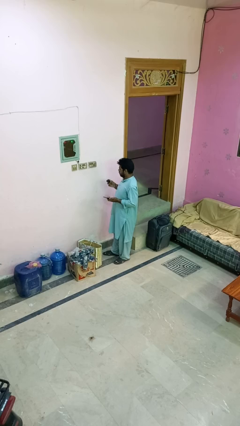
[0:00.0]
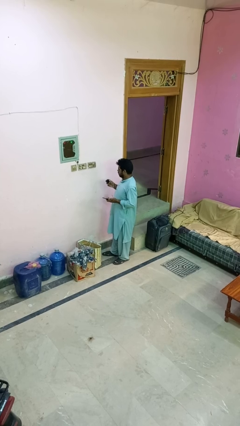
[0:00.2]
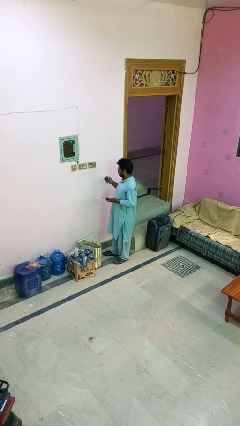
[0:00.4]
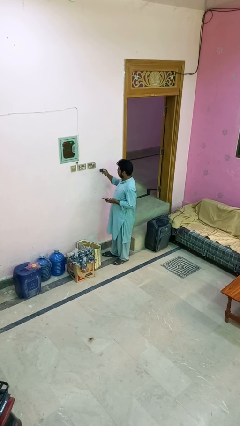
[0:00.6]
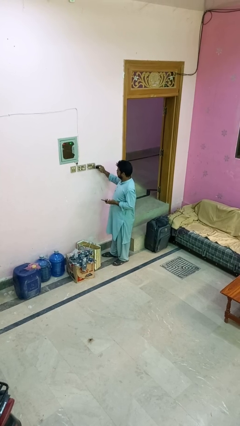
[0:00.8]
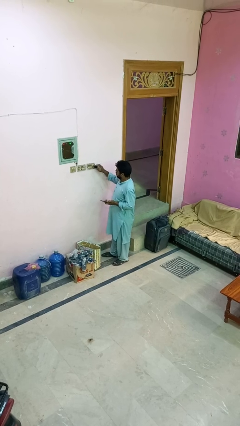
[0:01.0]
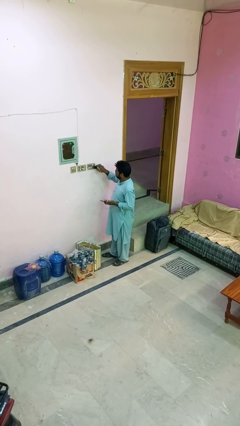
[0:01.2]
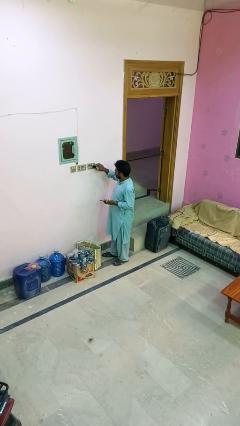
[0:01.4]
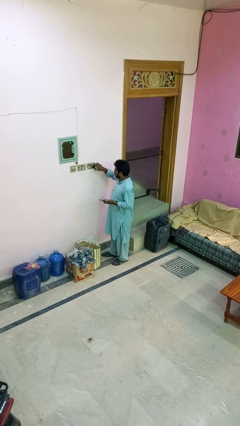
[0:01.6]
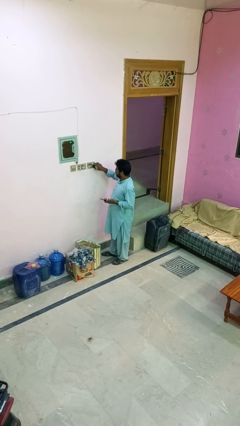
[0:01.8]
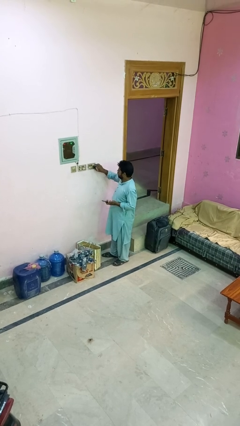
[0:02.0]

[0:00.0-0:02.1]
person plugs into electrical socket

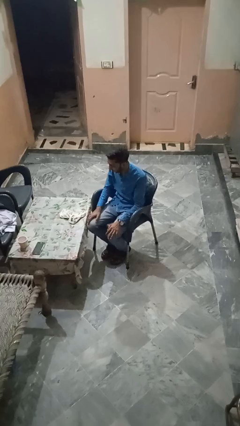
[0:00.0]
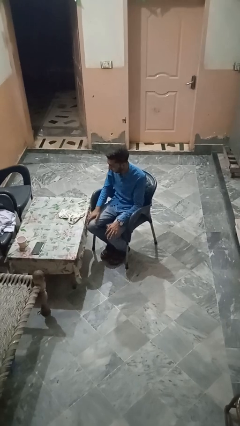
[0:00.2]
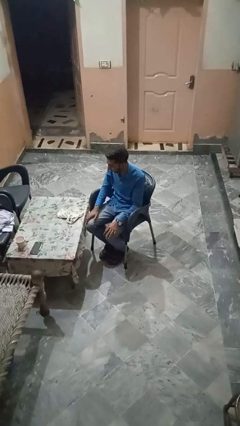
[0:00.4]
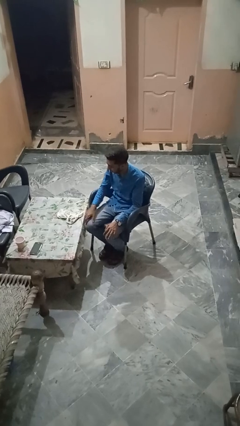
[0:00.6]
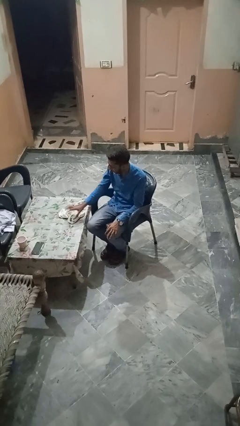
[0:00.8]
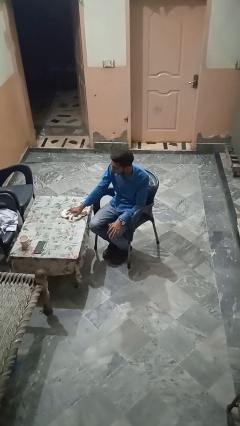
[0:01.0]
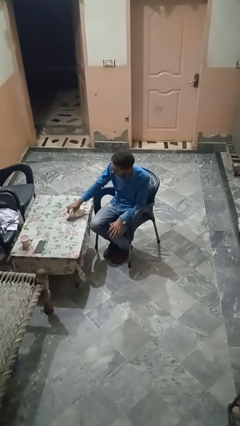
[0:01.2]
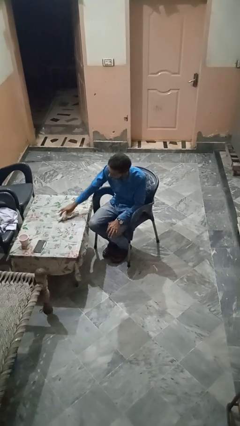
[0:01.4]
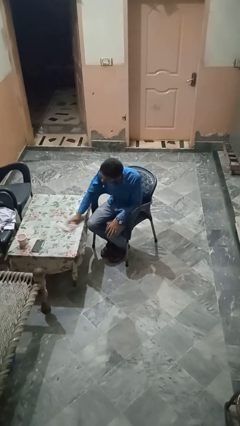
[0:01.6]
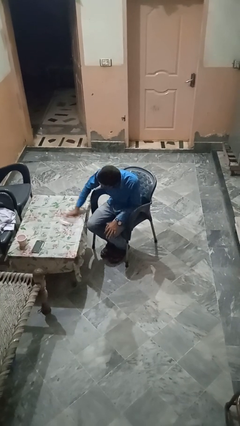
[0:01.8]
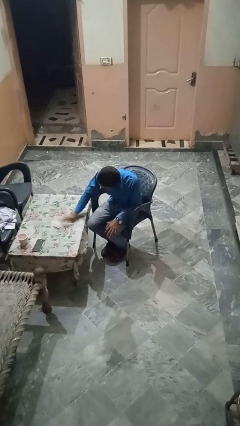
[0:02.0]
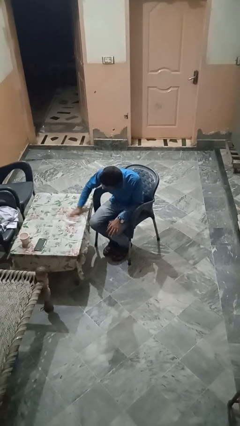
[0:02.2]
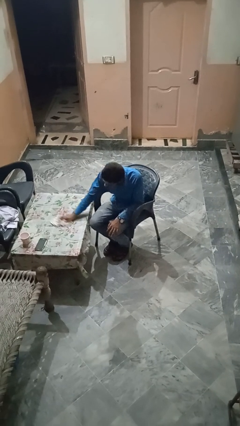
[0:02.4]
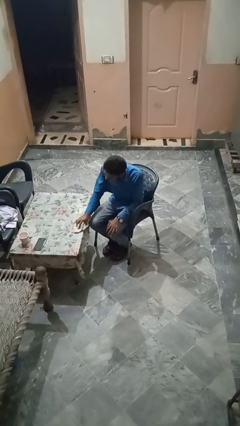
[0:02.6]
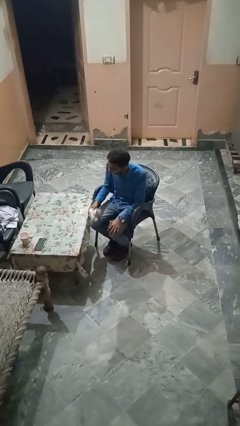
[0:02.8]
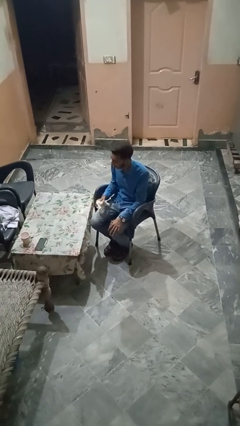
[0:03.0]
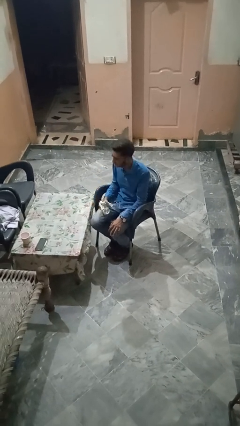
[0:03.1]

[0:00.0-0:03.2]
person cleans table with rag

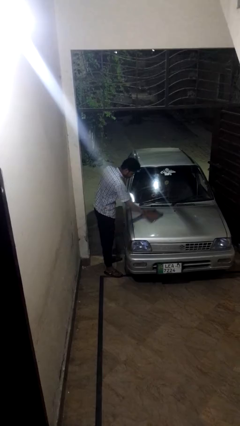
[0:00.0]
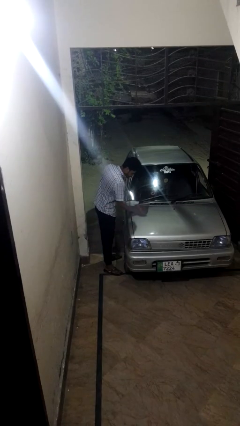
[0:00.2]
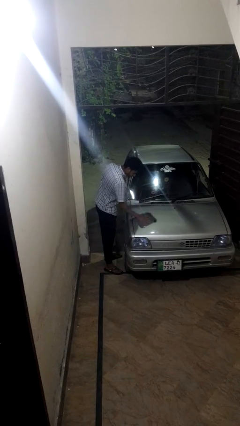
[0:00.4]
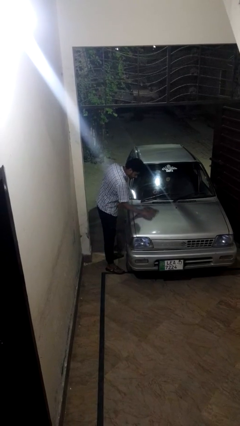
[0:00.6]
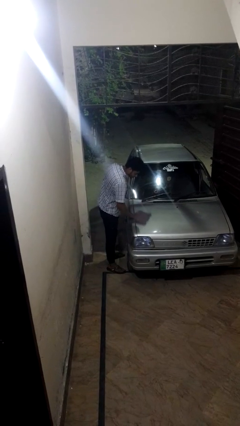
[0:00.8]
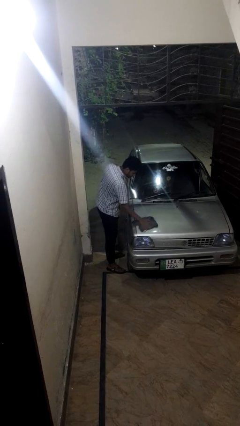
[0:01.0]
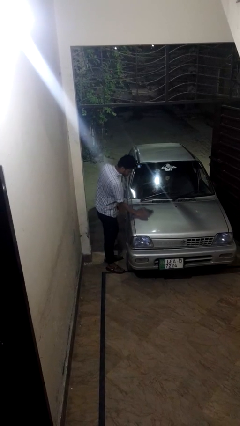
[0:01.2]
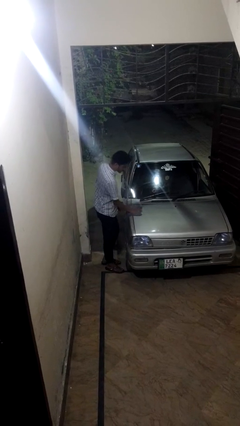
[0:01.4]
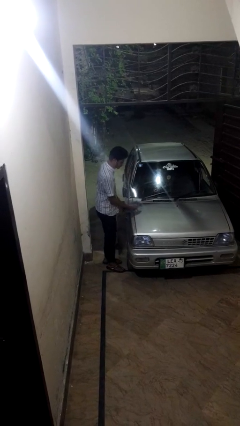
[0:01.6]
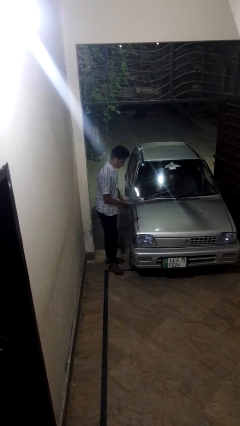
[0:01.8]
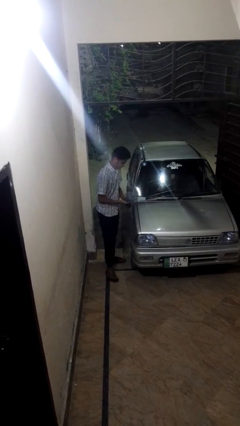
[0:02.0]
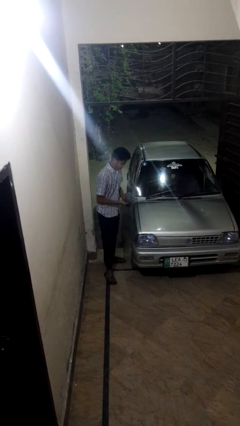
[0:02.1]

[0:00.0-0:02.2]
person polishes car with rag

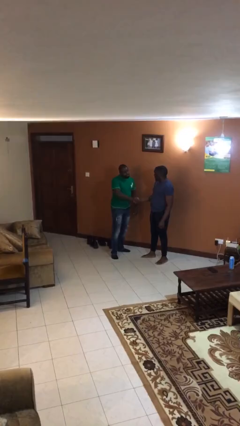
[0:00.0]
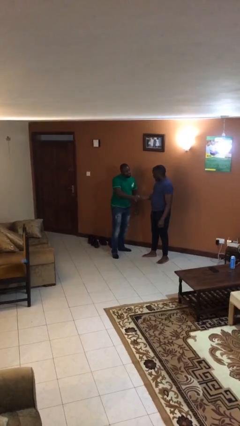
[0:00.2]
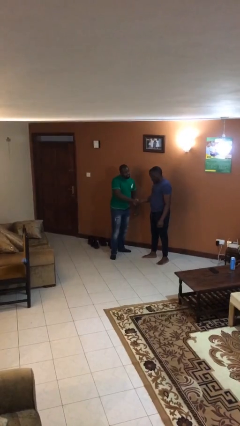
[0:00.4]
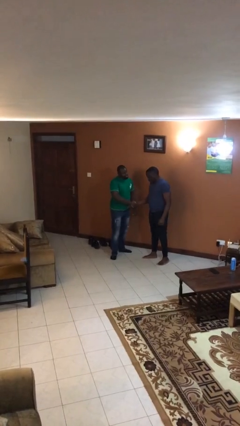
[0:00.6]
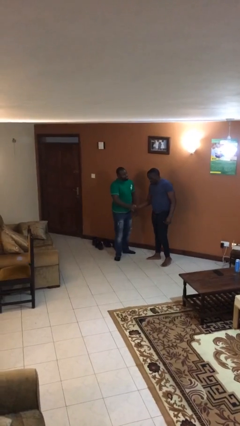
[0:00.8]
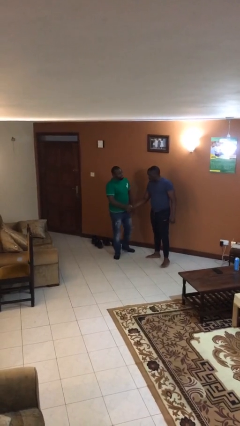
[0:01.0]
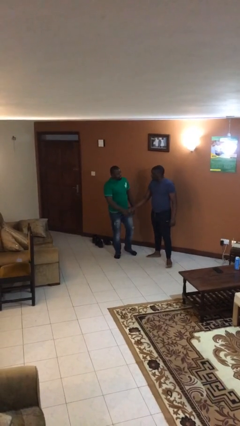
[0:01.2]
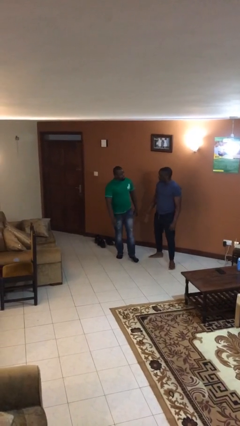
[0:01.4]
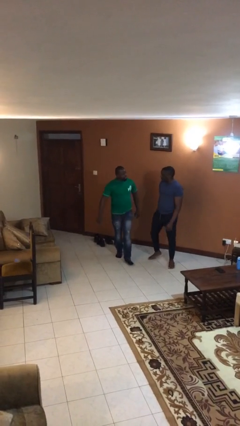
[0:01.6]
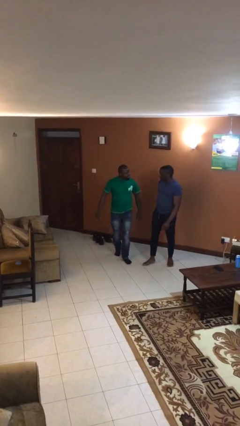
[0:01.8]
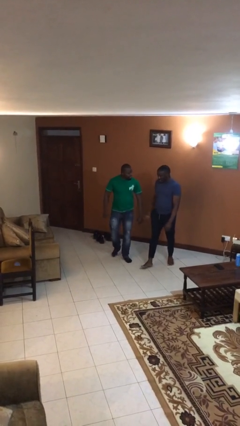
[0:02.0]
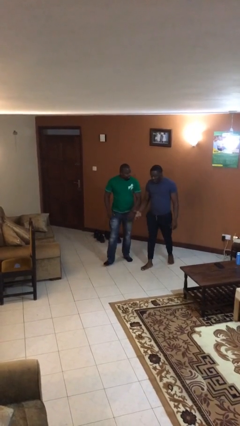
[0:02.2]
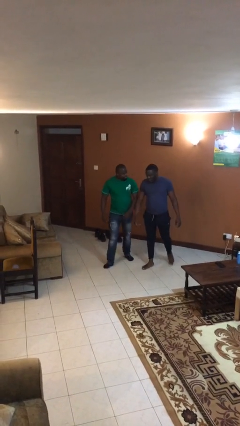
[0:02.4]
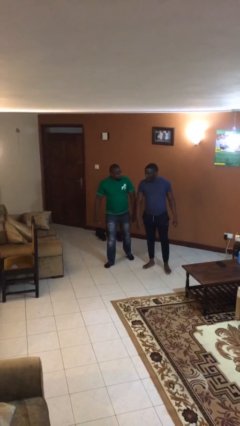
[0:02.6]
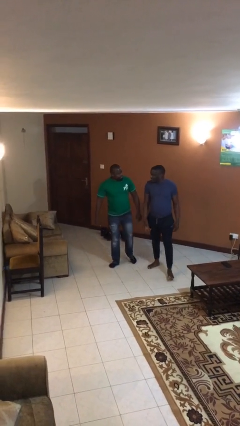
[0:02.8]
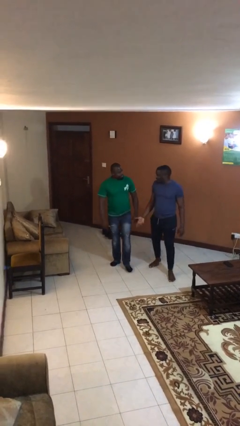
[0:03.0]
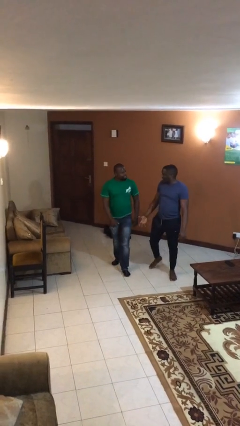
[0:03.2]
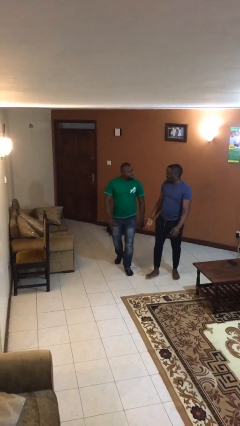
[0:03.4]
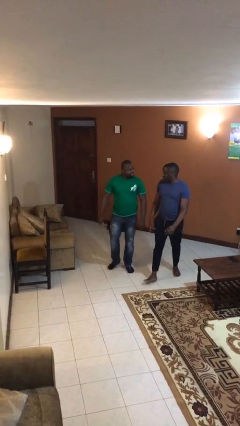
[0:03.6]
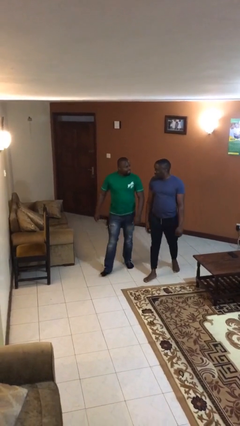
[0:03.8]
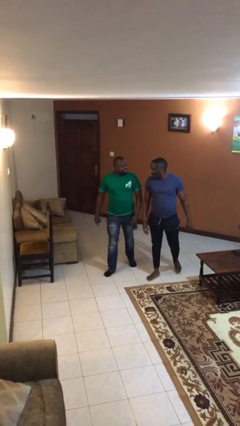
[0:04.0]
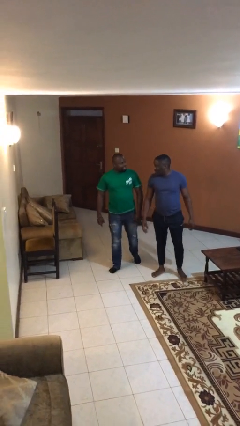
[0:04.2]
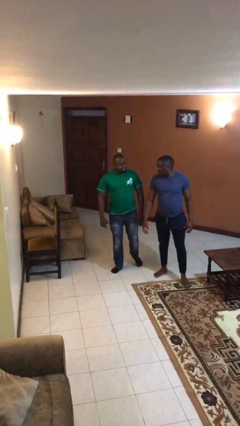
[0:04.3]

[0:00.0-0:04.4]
person talks to person

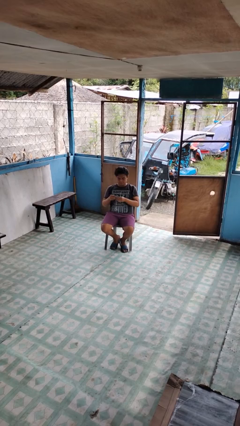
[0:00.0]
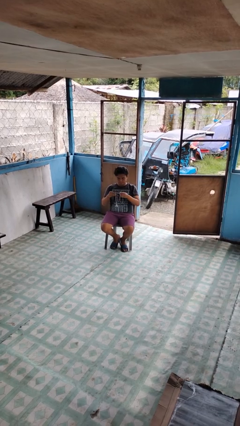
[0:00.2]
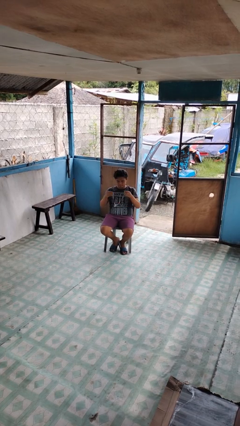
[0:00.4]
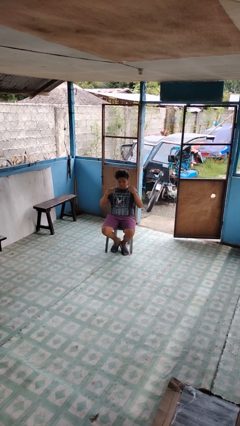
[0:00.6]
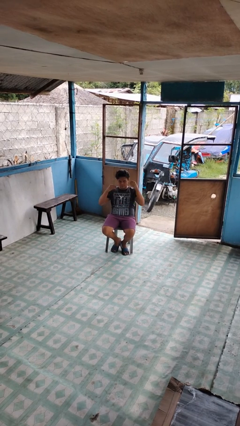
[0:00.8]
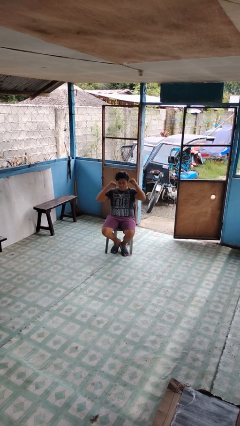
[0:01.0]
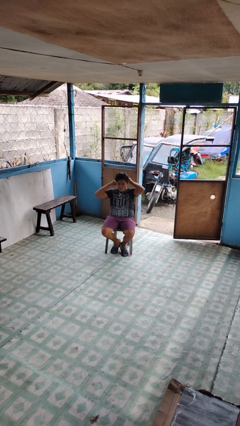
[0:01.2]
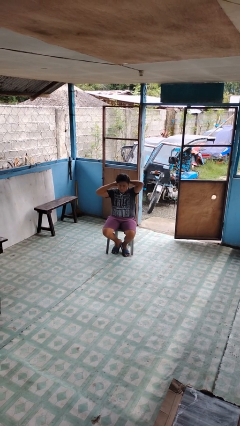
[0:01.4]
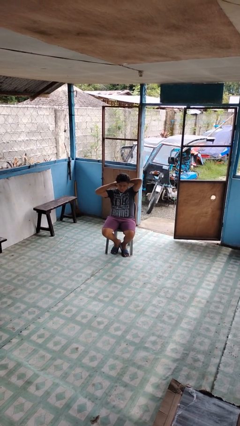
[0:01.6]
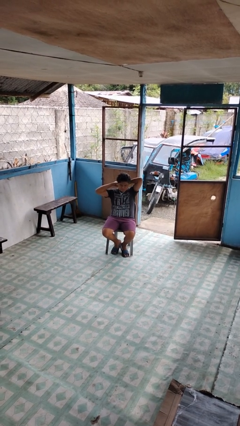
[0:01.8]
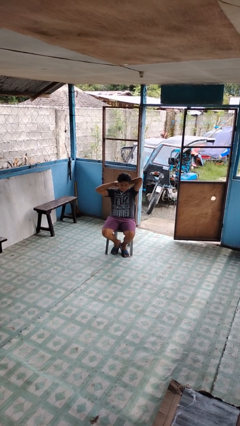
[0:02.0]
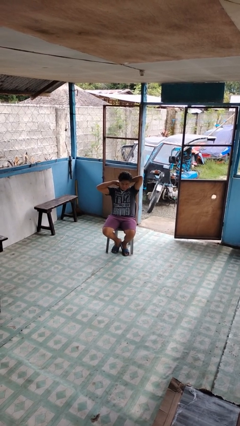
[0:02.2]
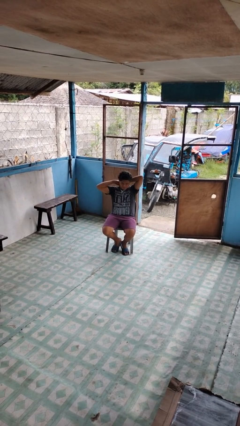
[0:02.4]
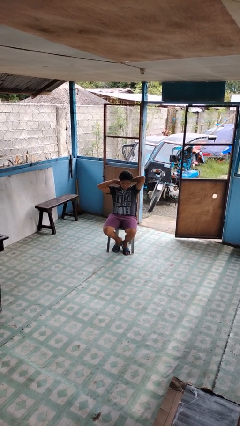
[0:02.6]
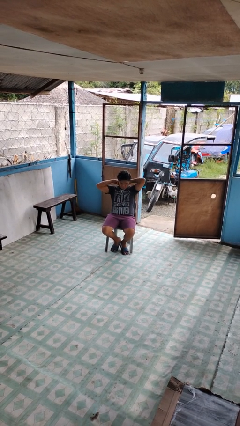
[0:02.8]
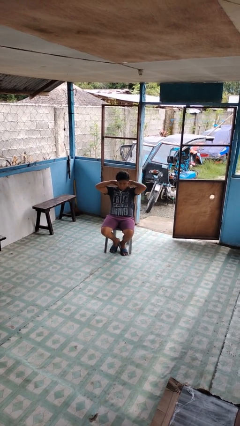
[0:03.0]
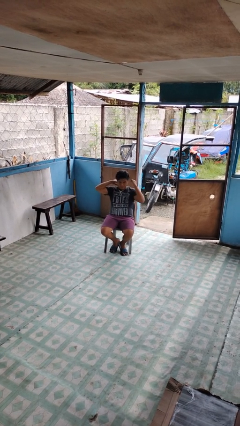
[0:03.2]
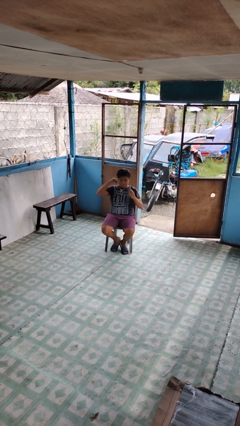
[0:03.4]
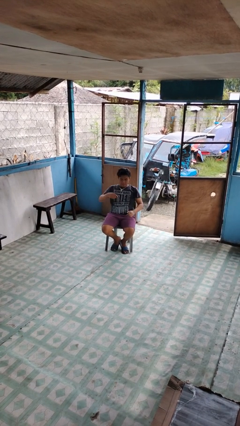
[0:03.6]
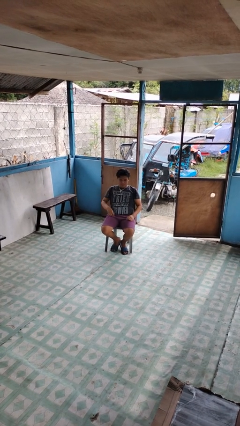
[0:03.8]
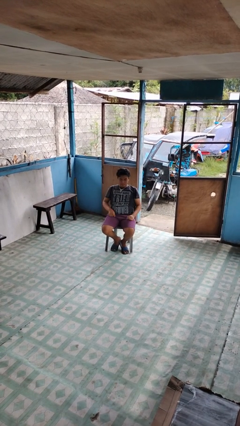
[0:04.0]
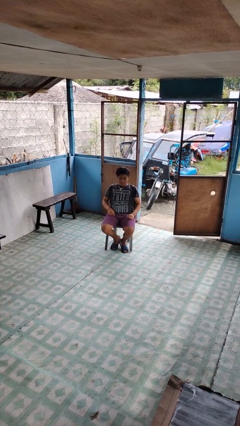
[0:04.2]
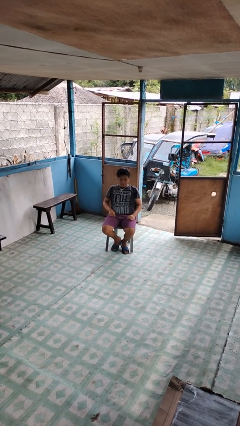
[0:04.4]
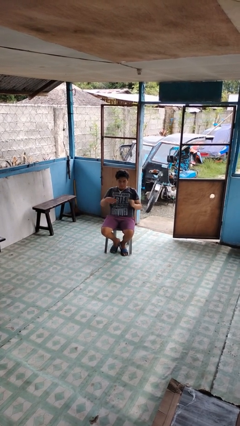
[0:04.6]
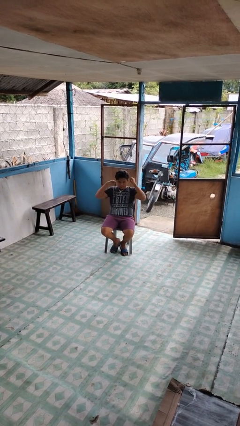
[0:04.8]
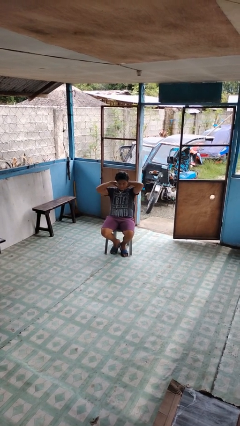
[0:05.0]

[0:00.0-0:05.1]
person puts on necklace

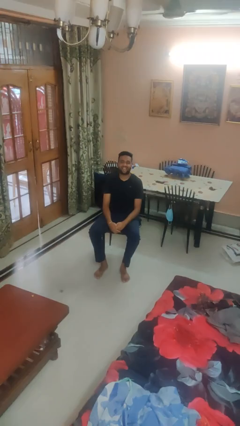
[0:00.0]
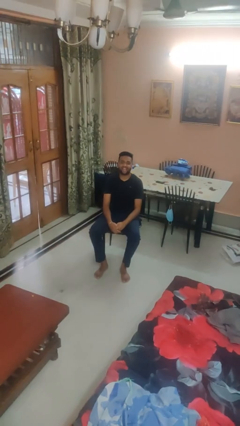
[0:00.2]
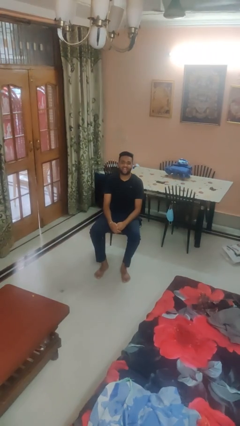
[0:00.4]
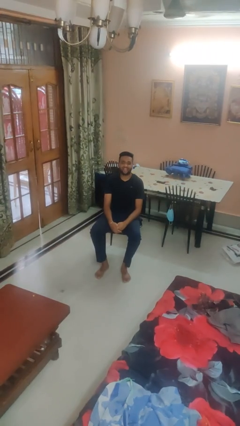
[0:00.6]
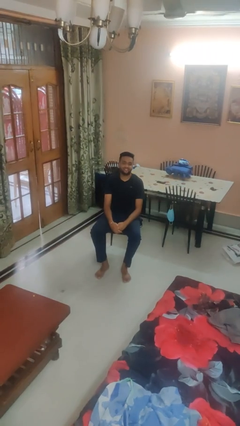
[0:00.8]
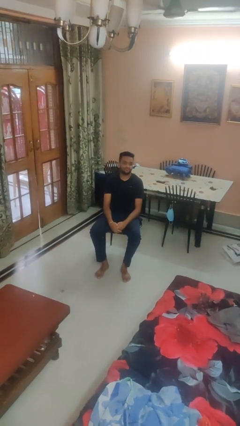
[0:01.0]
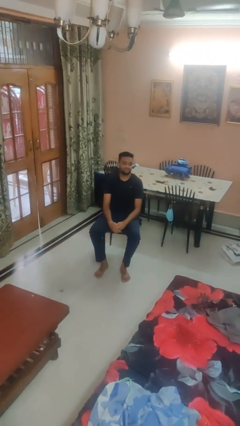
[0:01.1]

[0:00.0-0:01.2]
person sticks out tongue
